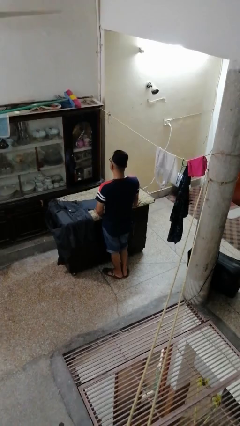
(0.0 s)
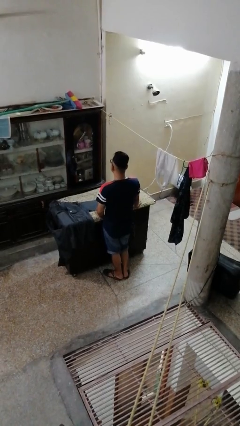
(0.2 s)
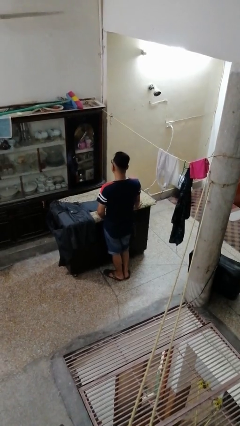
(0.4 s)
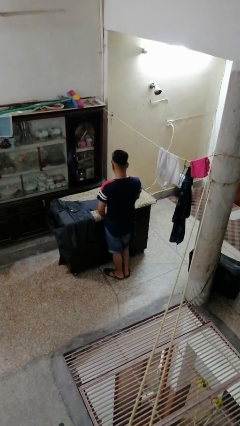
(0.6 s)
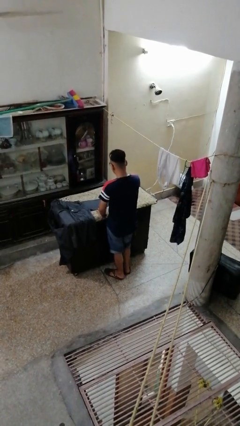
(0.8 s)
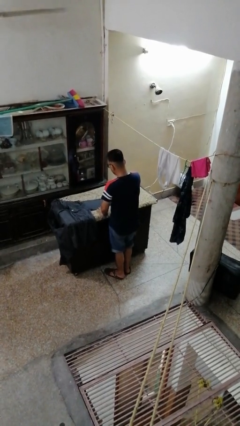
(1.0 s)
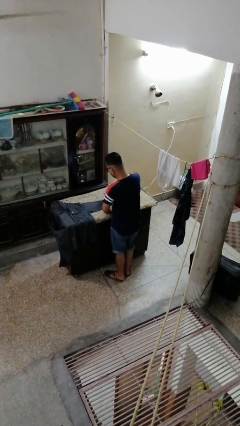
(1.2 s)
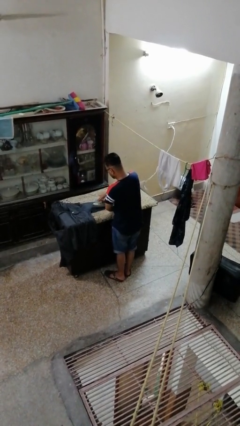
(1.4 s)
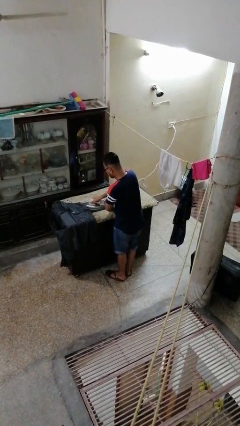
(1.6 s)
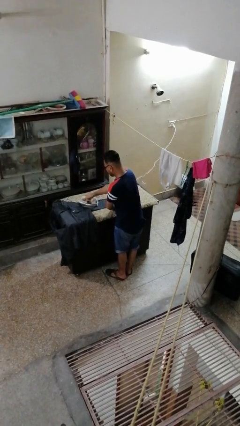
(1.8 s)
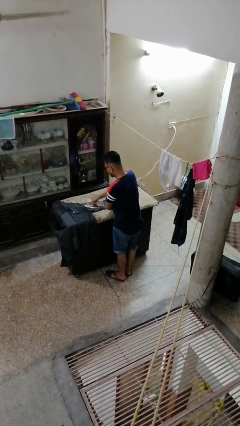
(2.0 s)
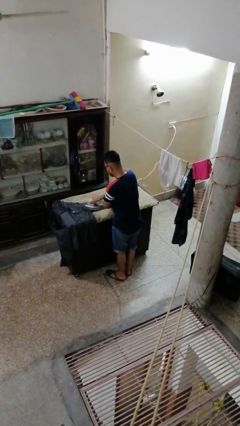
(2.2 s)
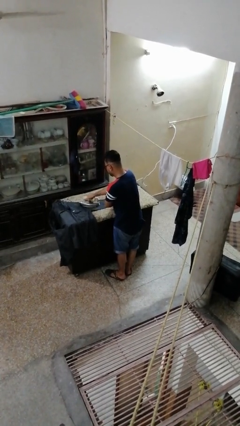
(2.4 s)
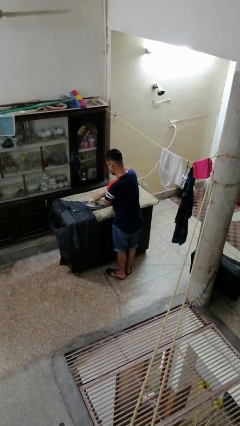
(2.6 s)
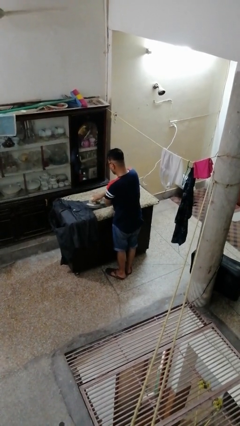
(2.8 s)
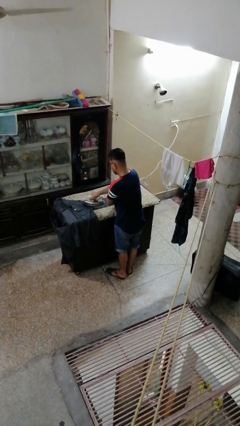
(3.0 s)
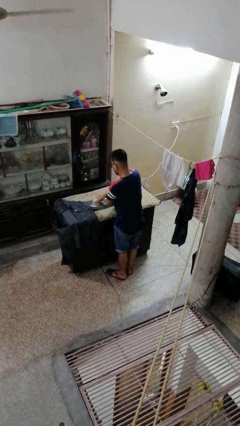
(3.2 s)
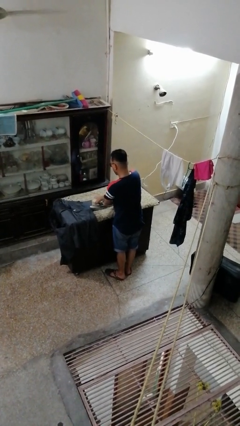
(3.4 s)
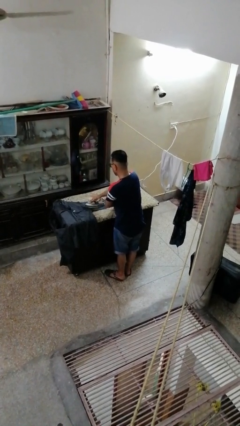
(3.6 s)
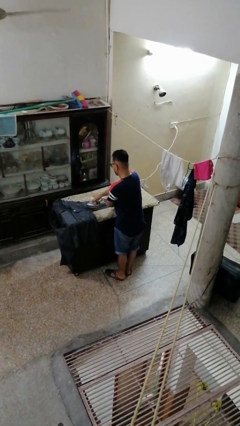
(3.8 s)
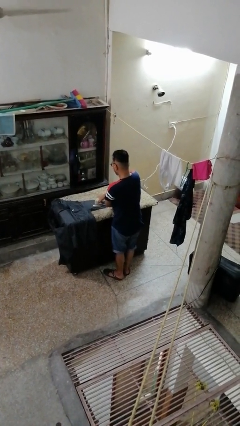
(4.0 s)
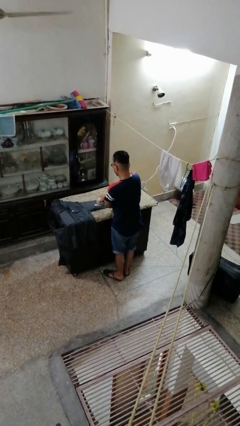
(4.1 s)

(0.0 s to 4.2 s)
person irons clothes

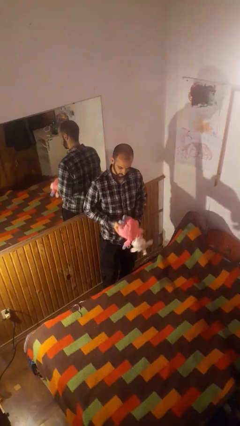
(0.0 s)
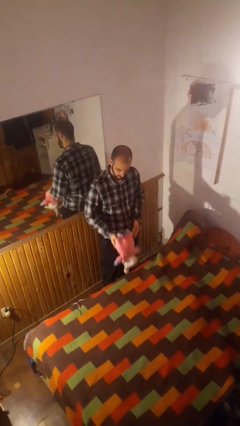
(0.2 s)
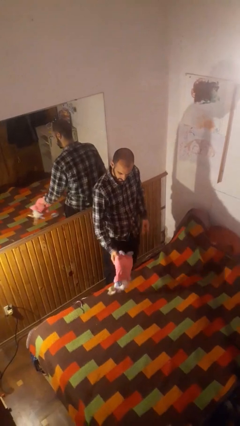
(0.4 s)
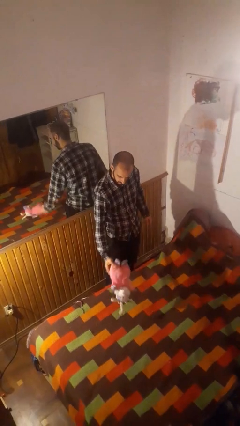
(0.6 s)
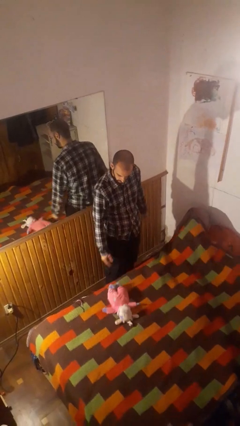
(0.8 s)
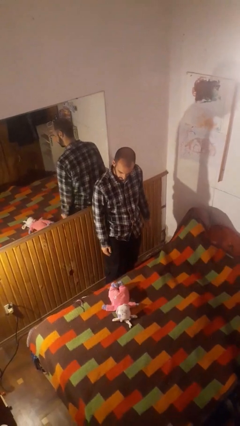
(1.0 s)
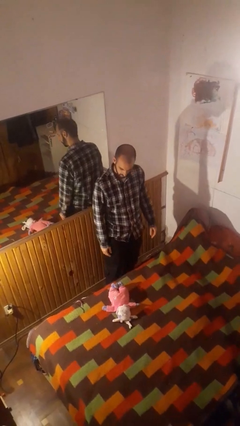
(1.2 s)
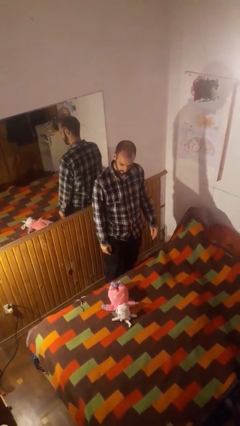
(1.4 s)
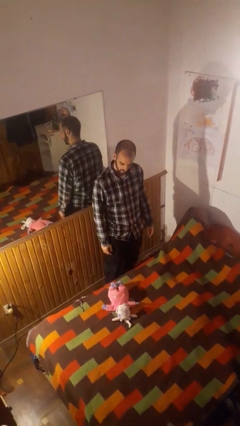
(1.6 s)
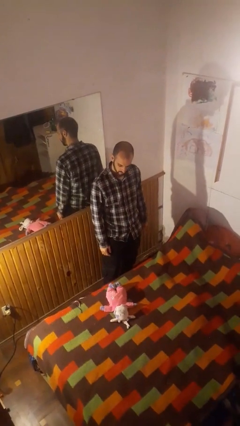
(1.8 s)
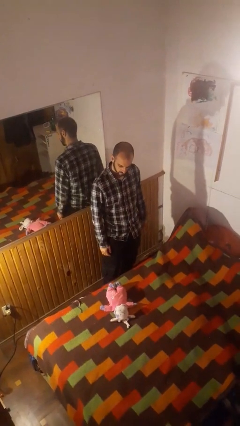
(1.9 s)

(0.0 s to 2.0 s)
person puts down object on bed

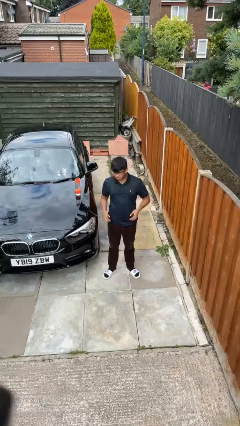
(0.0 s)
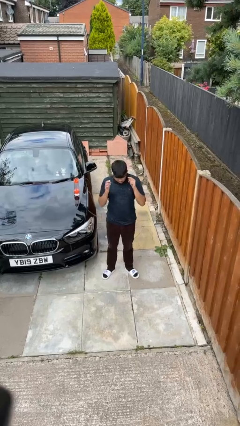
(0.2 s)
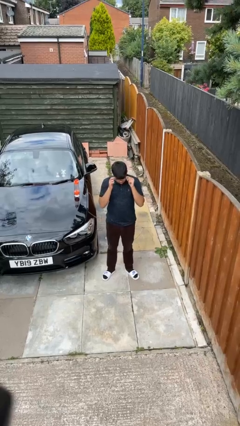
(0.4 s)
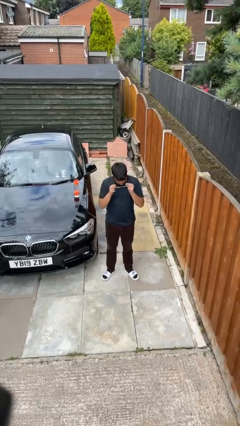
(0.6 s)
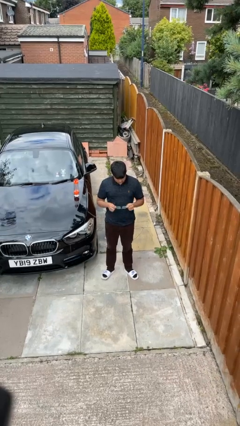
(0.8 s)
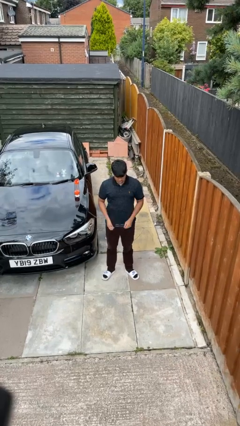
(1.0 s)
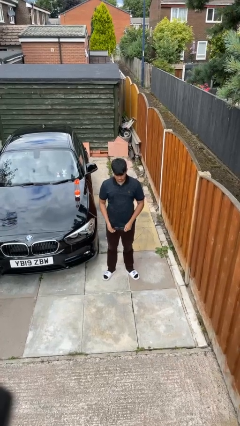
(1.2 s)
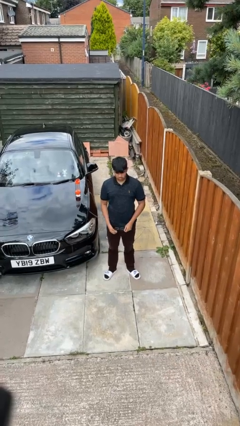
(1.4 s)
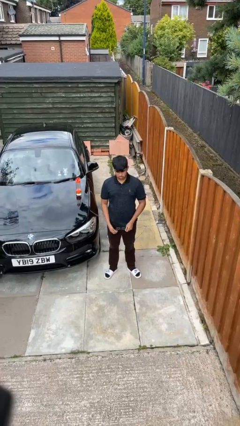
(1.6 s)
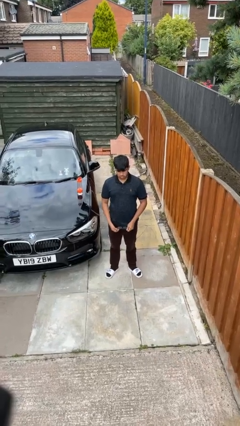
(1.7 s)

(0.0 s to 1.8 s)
person takes off glasses

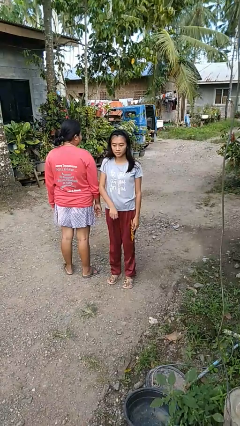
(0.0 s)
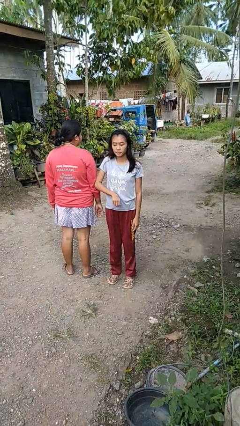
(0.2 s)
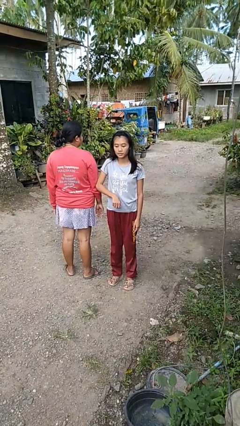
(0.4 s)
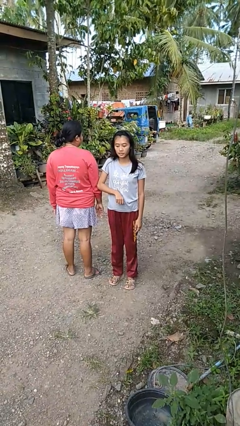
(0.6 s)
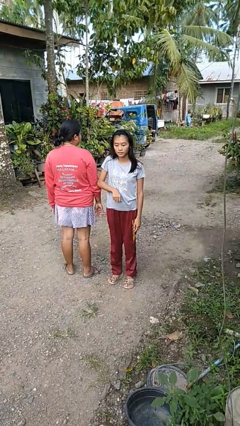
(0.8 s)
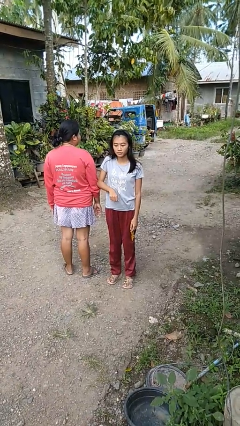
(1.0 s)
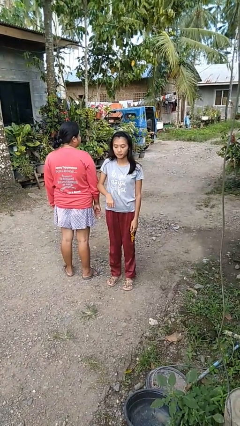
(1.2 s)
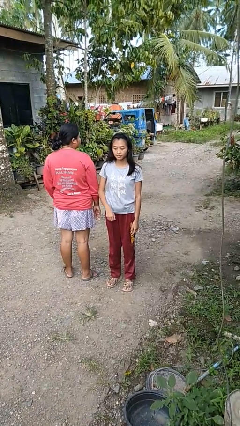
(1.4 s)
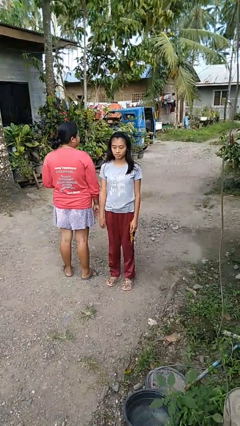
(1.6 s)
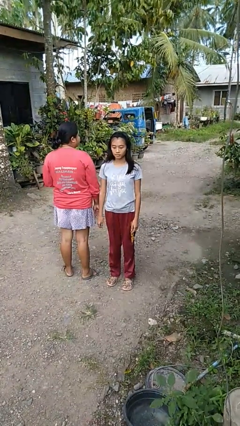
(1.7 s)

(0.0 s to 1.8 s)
person nudges person with elbow

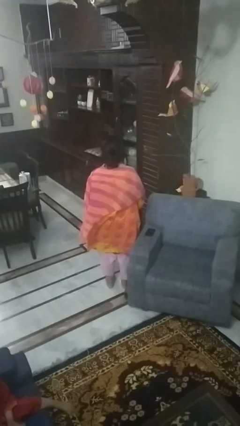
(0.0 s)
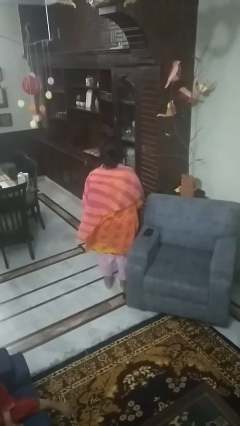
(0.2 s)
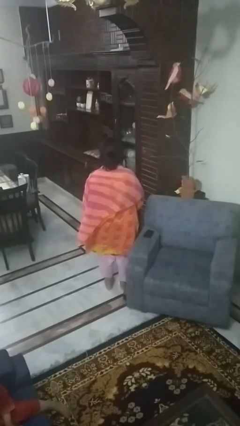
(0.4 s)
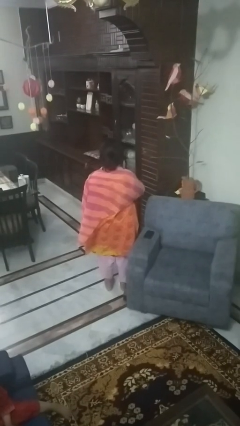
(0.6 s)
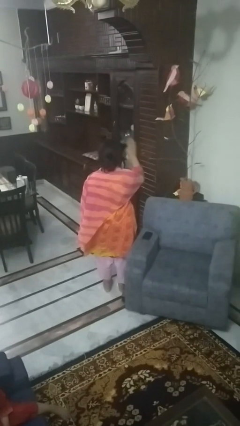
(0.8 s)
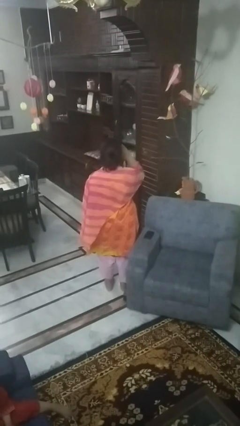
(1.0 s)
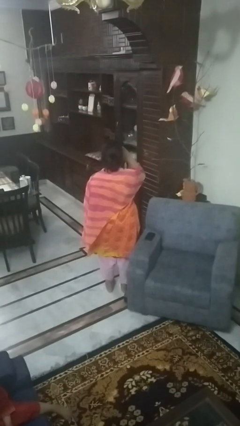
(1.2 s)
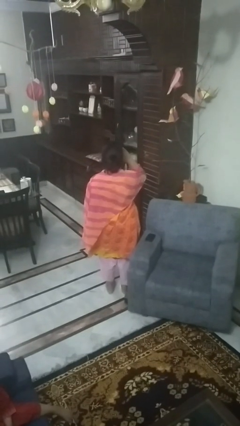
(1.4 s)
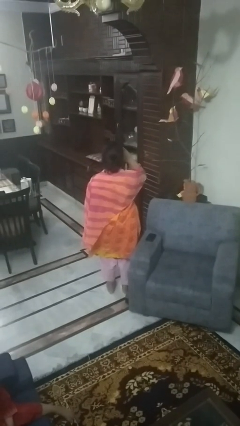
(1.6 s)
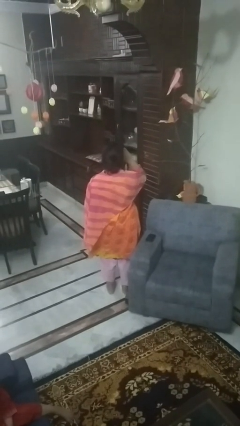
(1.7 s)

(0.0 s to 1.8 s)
person salutes

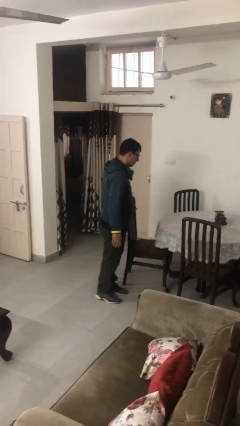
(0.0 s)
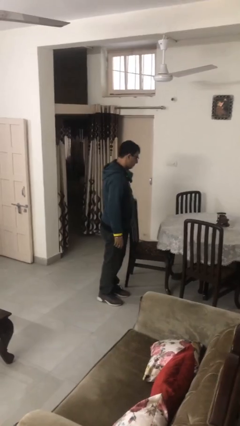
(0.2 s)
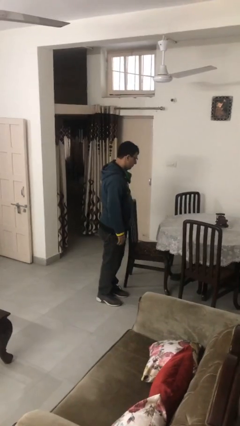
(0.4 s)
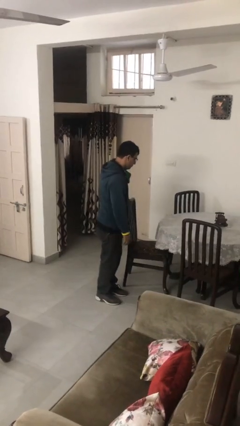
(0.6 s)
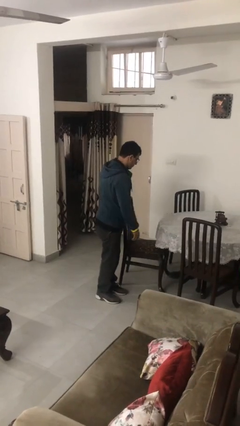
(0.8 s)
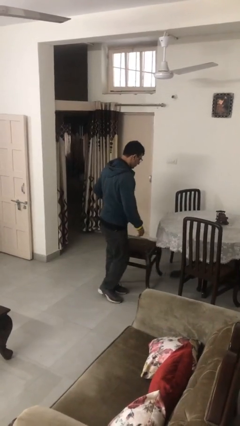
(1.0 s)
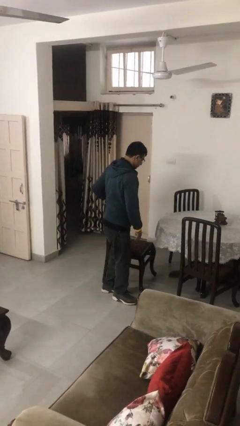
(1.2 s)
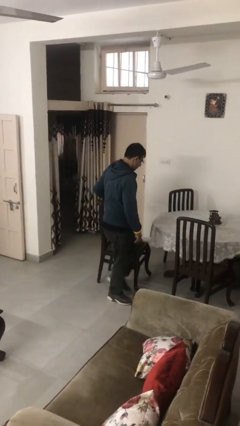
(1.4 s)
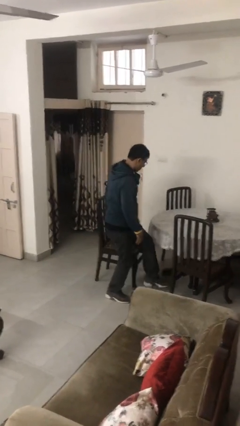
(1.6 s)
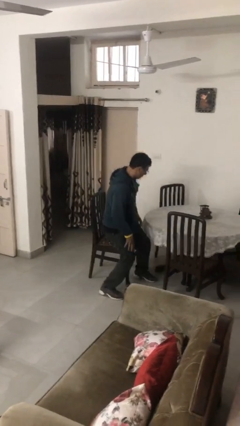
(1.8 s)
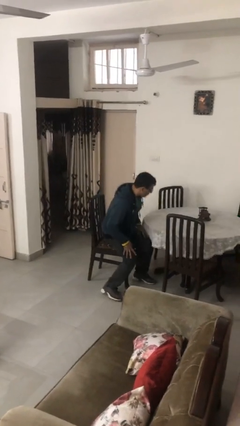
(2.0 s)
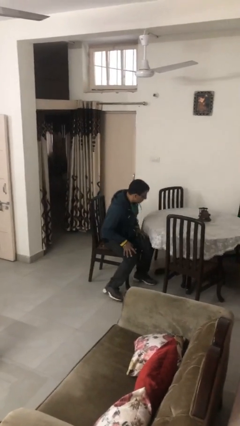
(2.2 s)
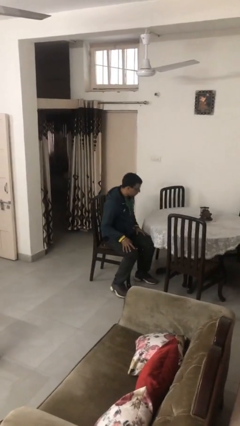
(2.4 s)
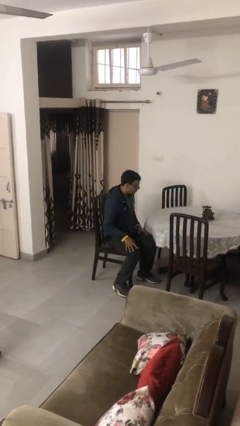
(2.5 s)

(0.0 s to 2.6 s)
person sits down

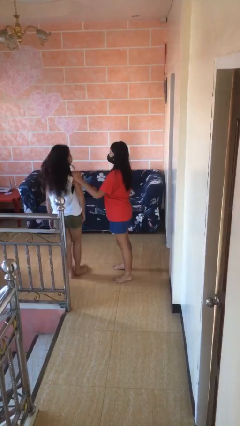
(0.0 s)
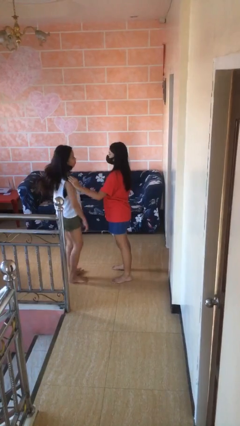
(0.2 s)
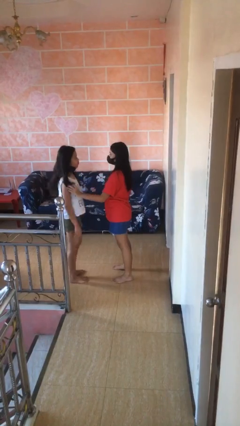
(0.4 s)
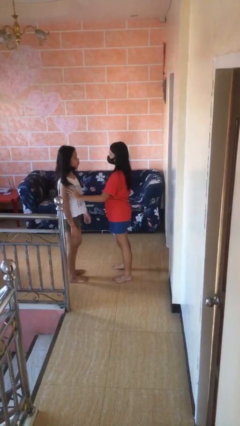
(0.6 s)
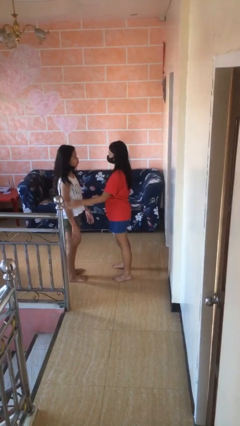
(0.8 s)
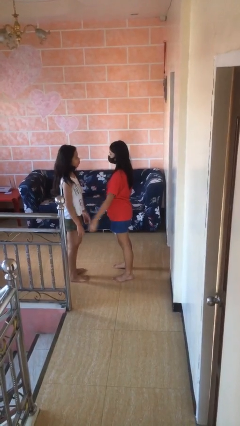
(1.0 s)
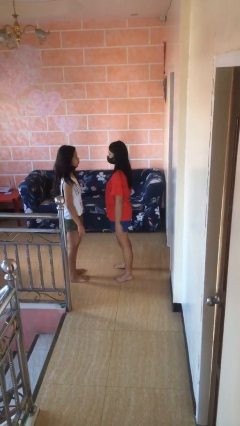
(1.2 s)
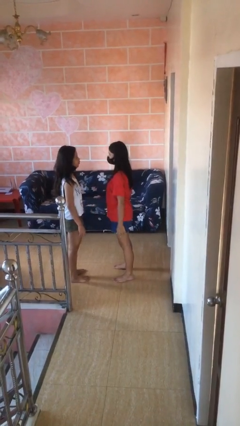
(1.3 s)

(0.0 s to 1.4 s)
person spins person around

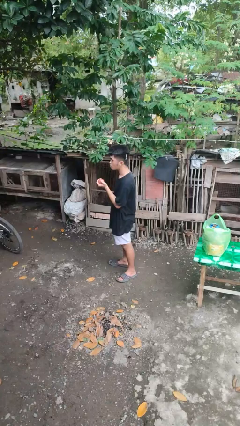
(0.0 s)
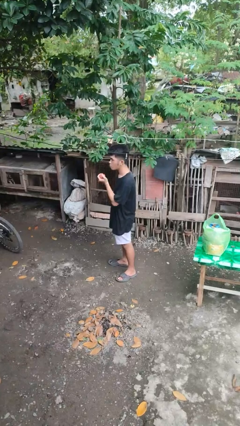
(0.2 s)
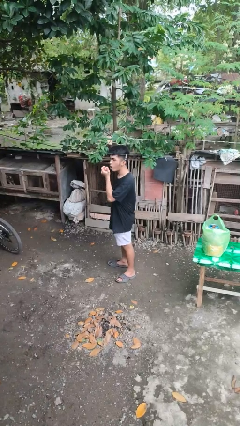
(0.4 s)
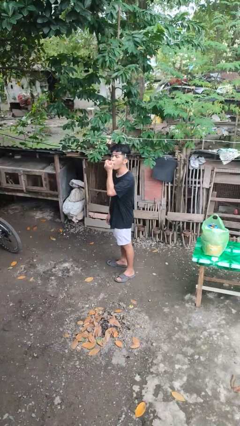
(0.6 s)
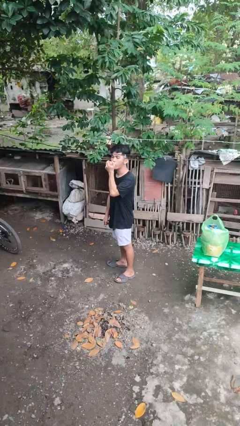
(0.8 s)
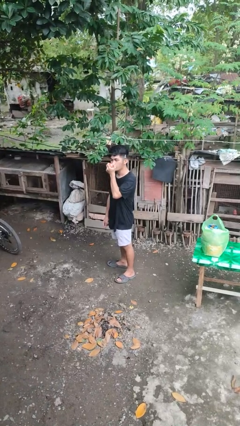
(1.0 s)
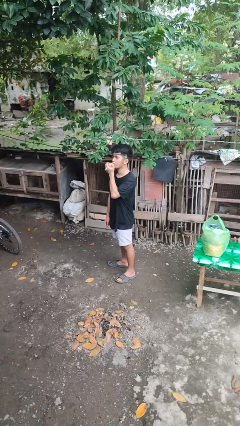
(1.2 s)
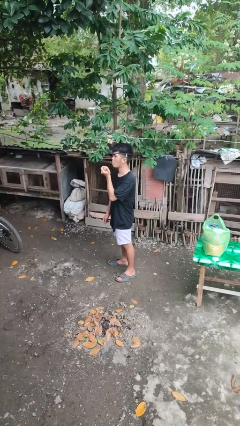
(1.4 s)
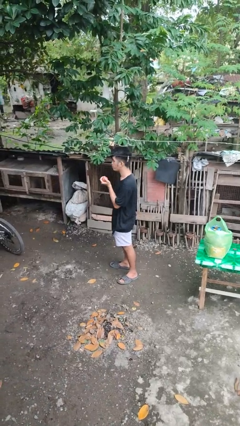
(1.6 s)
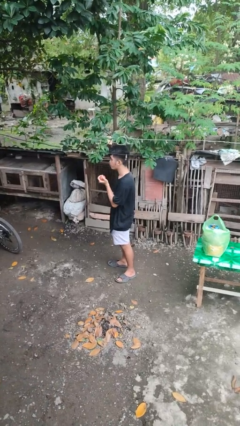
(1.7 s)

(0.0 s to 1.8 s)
person eats apple
